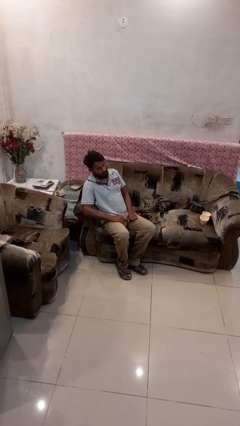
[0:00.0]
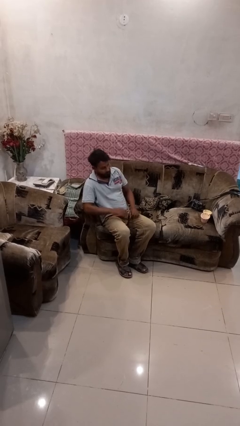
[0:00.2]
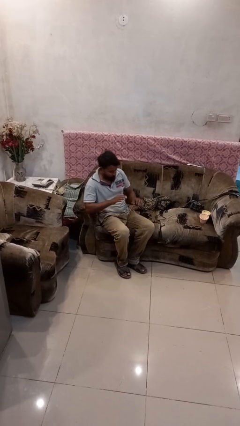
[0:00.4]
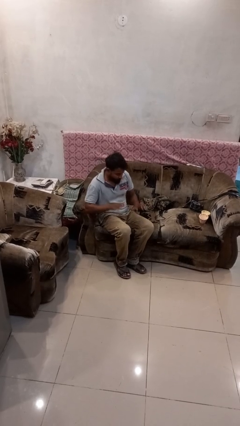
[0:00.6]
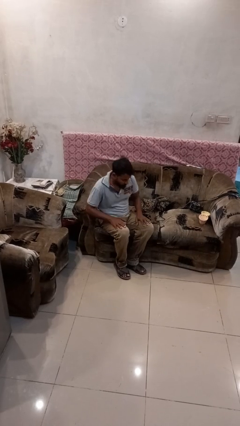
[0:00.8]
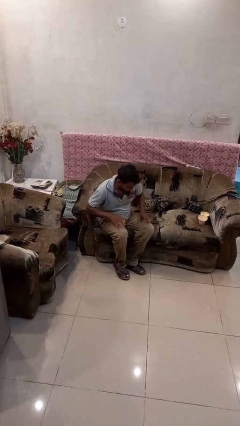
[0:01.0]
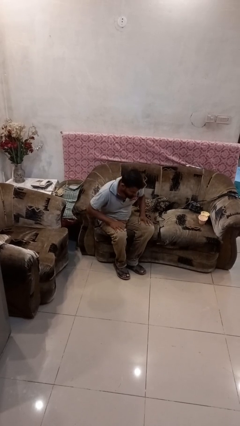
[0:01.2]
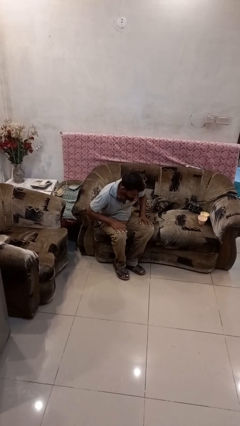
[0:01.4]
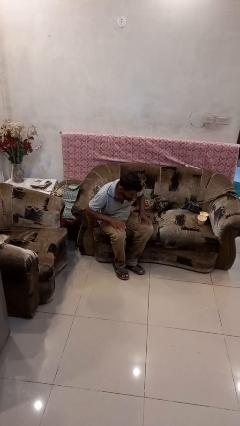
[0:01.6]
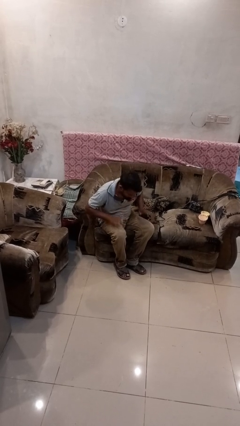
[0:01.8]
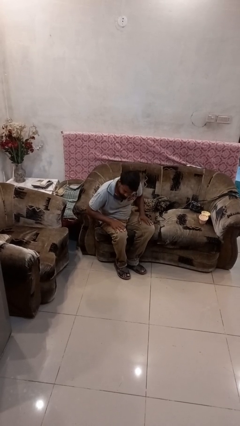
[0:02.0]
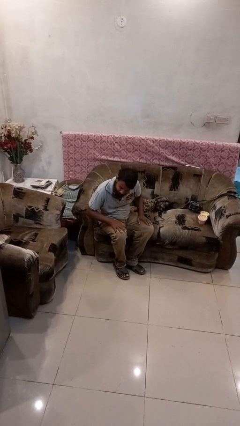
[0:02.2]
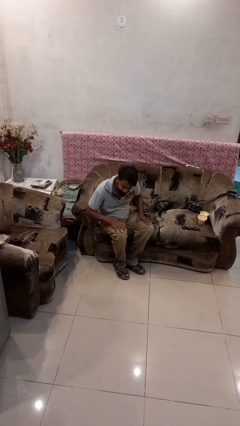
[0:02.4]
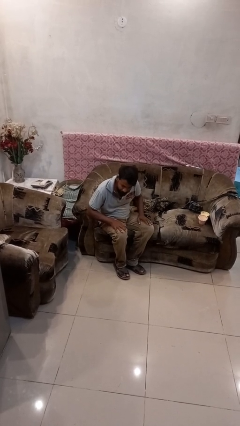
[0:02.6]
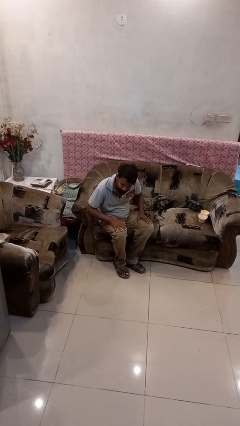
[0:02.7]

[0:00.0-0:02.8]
person slaps hands on thighs

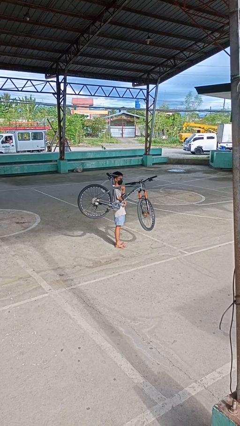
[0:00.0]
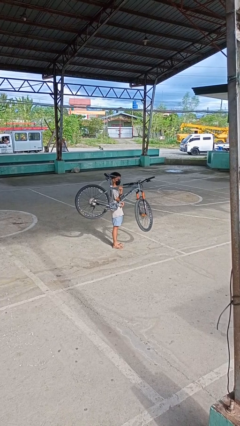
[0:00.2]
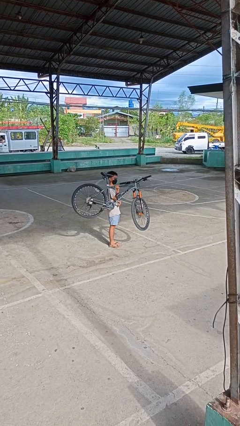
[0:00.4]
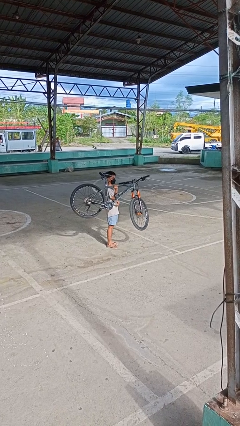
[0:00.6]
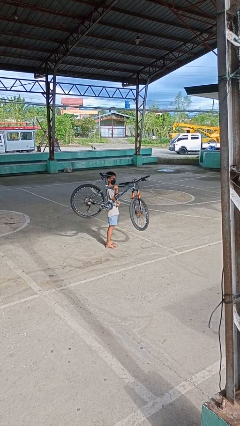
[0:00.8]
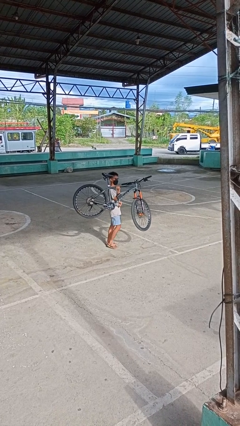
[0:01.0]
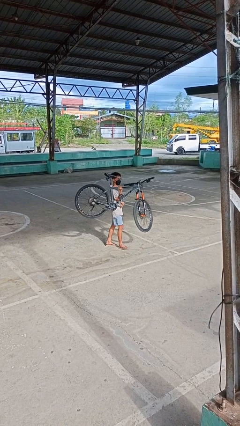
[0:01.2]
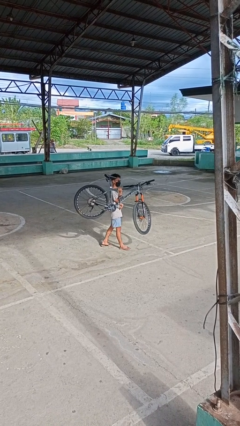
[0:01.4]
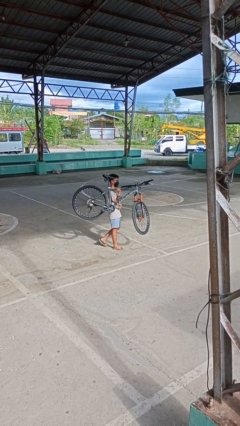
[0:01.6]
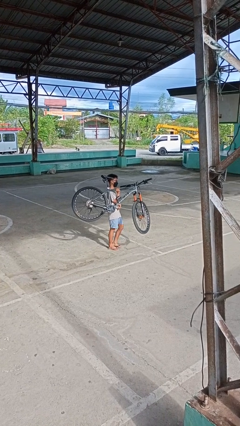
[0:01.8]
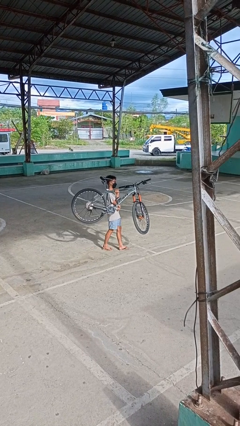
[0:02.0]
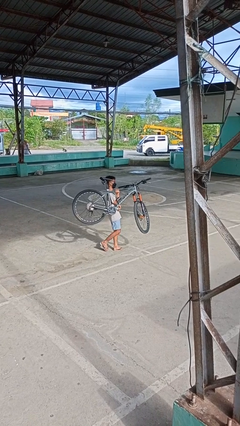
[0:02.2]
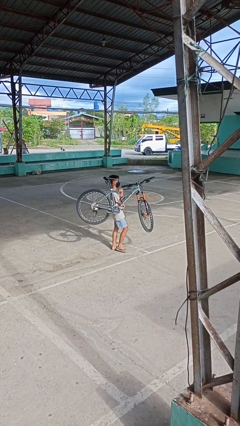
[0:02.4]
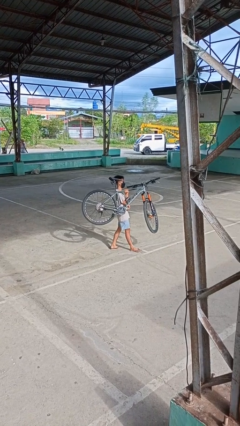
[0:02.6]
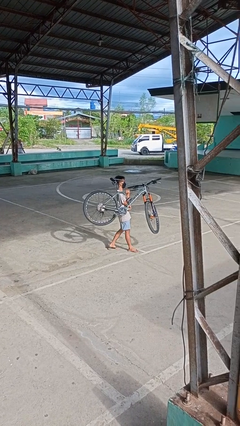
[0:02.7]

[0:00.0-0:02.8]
person carries bicycle

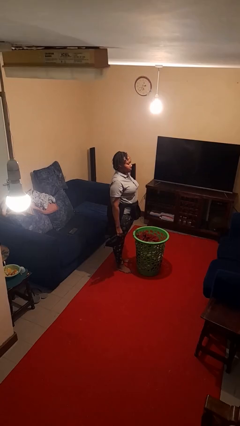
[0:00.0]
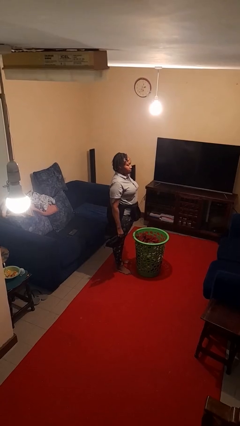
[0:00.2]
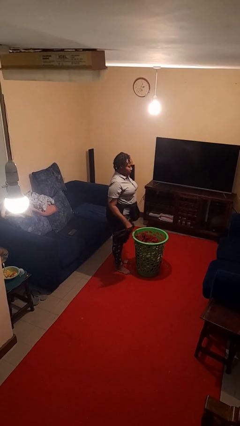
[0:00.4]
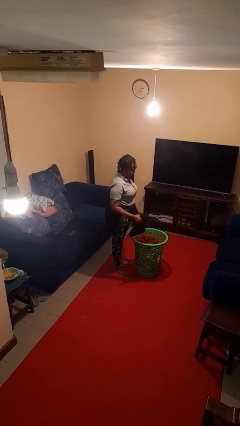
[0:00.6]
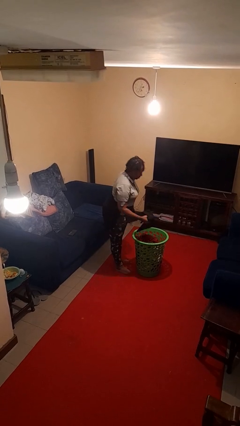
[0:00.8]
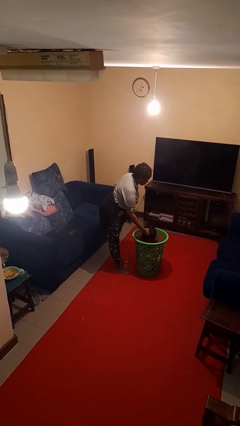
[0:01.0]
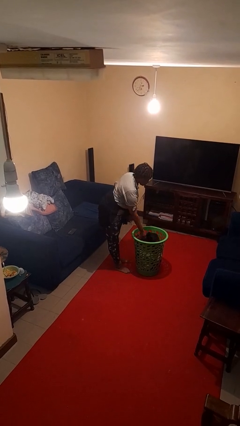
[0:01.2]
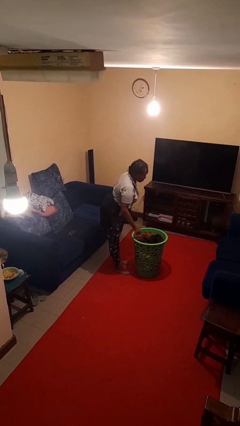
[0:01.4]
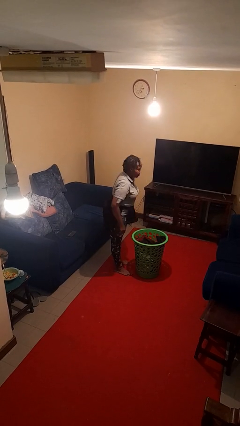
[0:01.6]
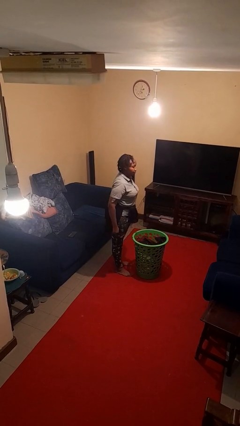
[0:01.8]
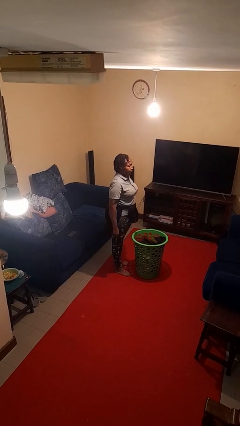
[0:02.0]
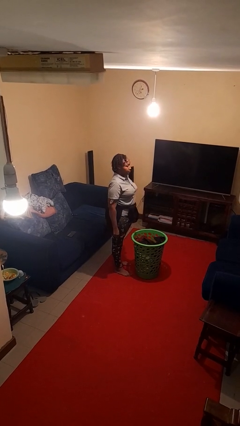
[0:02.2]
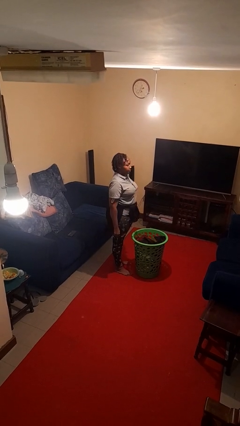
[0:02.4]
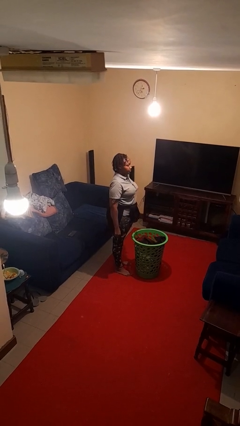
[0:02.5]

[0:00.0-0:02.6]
person puts object into basket

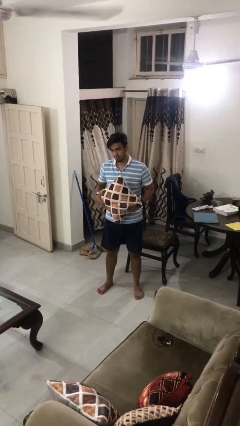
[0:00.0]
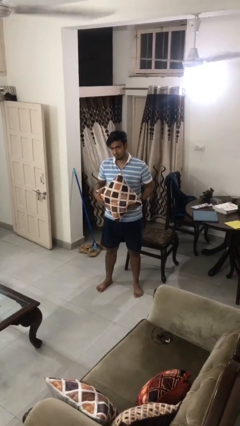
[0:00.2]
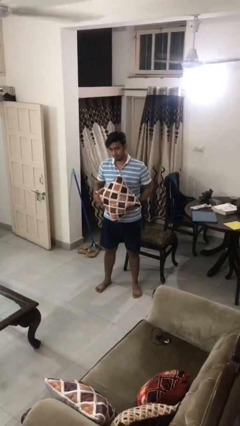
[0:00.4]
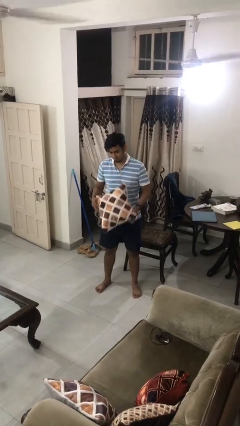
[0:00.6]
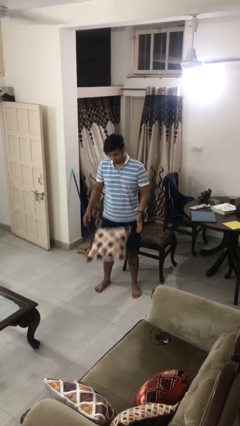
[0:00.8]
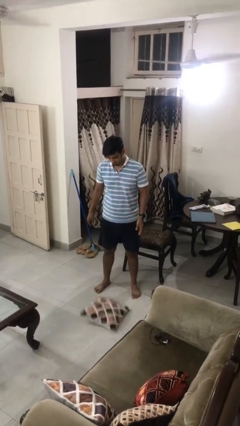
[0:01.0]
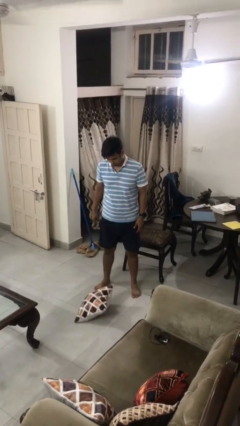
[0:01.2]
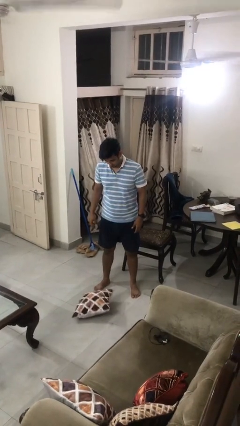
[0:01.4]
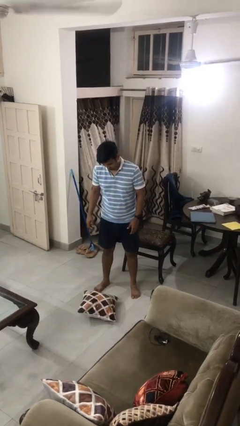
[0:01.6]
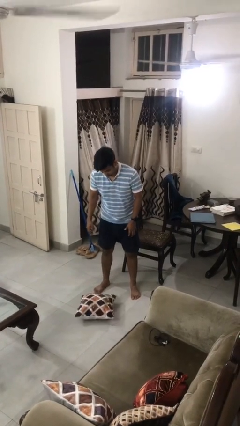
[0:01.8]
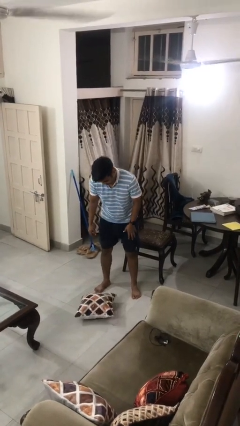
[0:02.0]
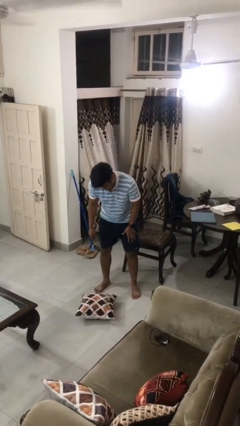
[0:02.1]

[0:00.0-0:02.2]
person drops object

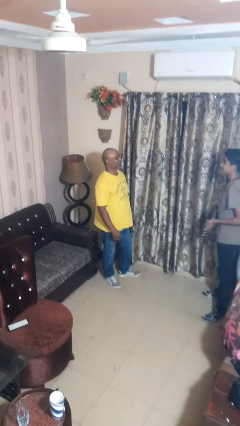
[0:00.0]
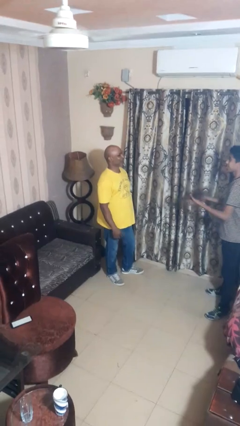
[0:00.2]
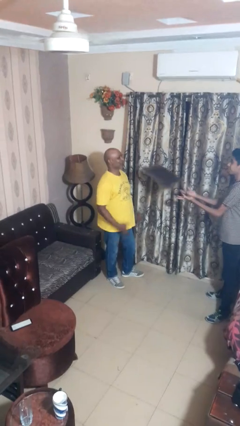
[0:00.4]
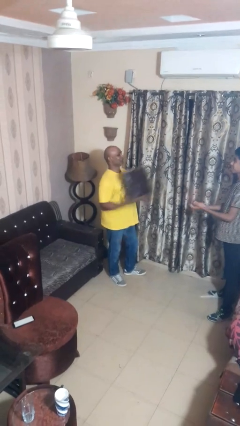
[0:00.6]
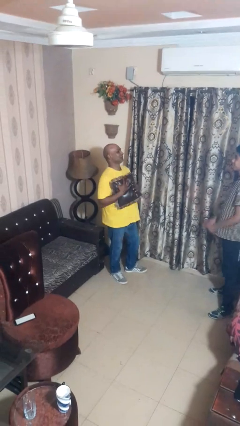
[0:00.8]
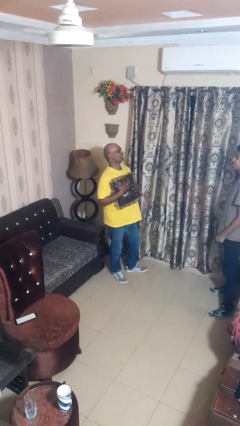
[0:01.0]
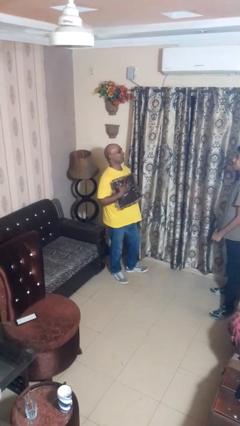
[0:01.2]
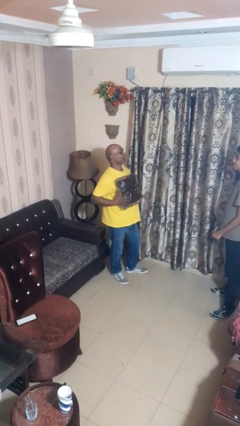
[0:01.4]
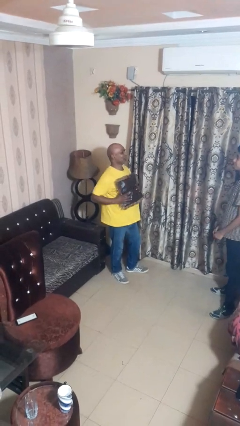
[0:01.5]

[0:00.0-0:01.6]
person catches object from person

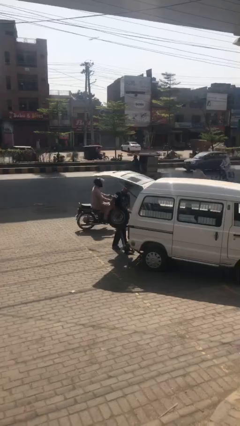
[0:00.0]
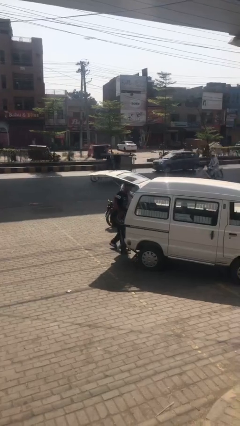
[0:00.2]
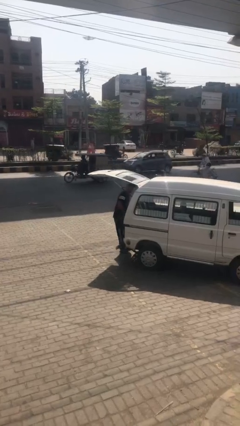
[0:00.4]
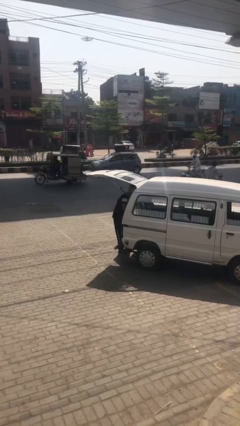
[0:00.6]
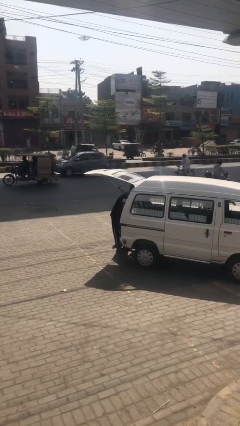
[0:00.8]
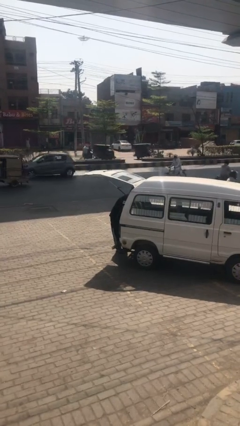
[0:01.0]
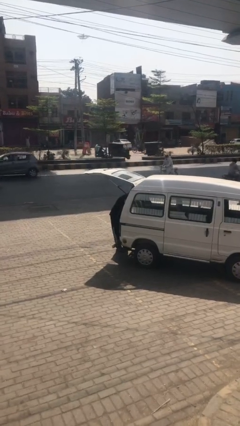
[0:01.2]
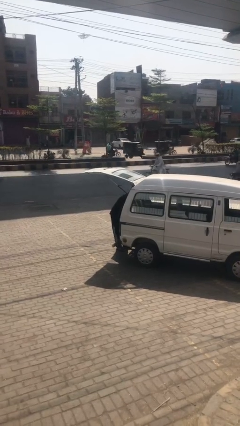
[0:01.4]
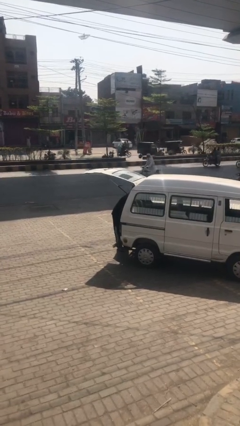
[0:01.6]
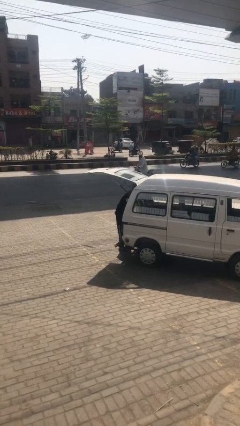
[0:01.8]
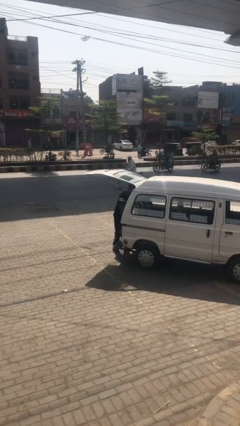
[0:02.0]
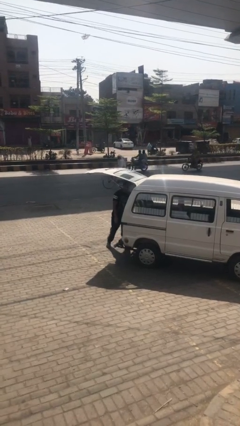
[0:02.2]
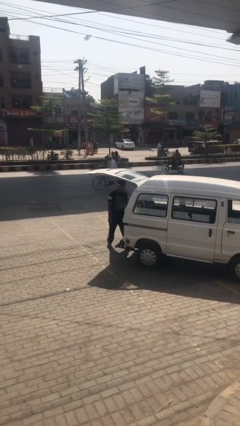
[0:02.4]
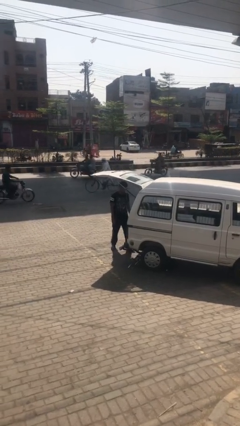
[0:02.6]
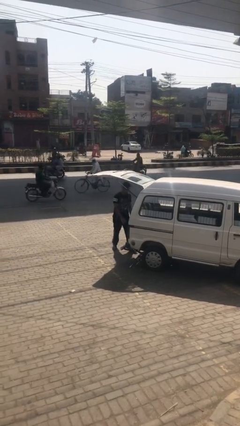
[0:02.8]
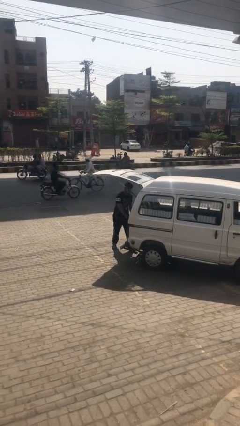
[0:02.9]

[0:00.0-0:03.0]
person loads car

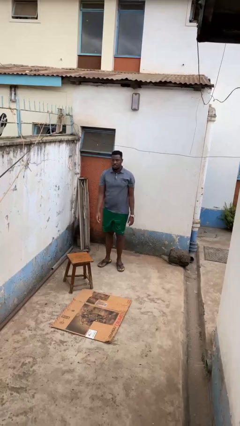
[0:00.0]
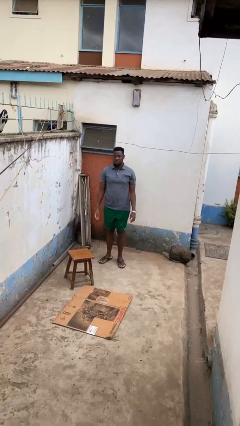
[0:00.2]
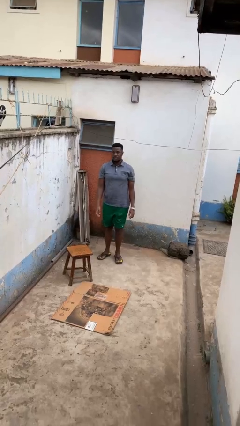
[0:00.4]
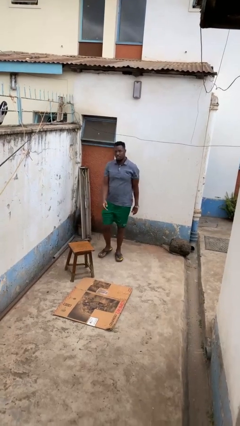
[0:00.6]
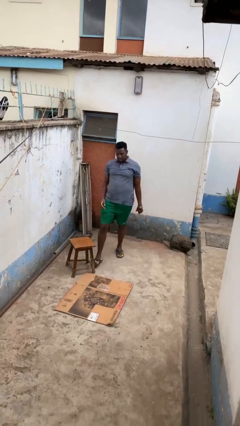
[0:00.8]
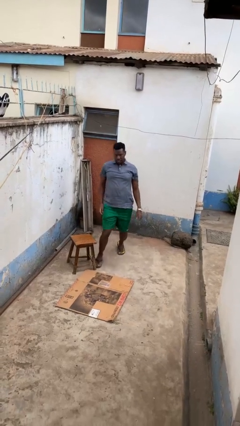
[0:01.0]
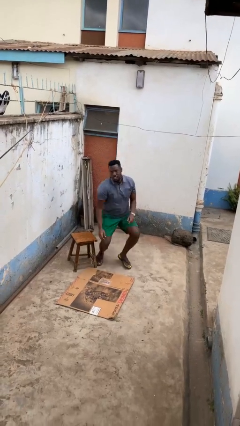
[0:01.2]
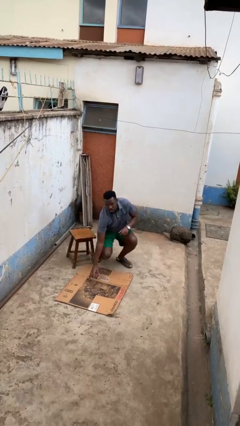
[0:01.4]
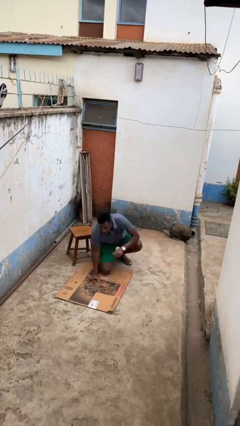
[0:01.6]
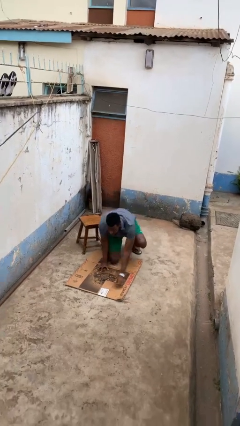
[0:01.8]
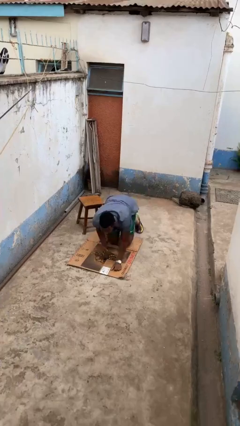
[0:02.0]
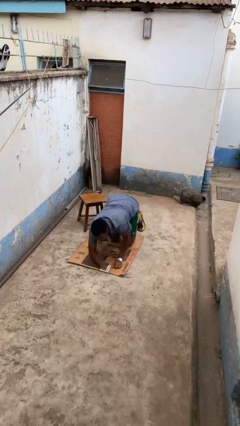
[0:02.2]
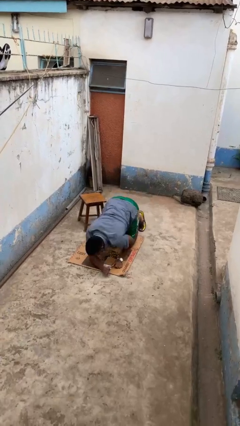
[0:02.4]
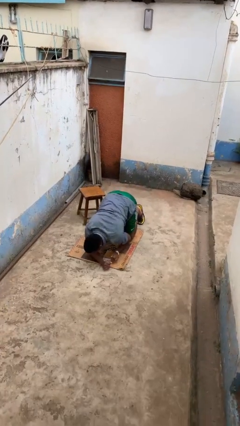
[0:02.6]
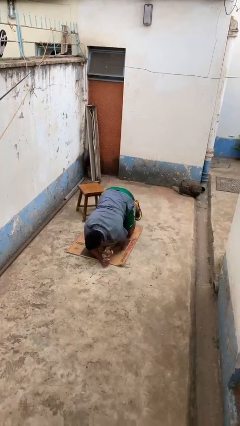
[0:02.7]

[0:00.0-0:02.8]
person trips on object on floor
